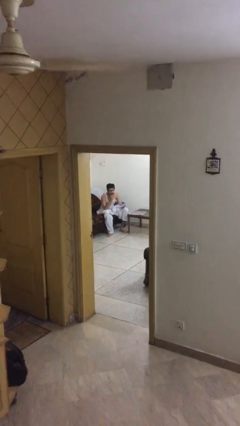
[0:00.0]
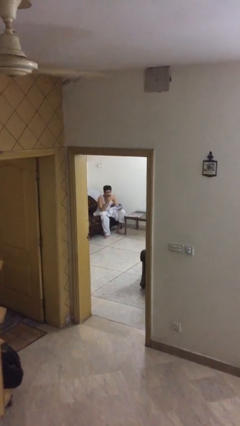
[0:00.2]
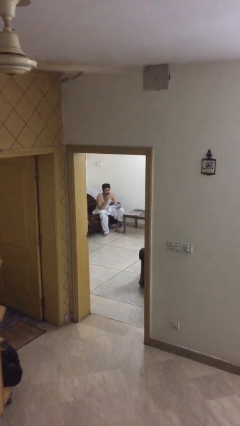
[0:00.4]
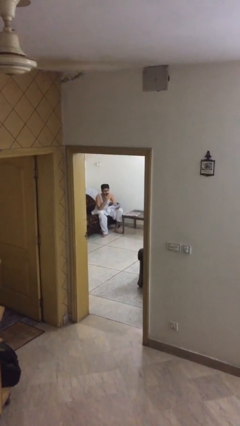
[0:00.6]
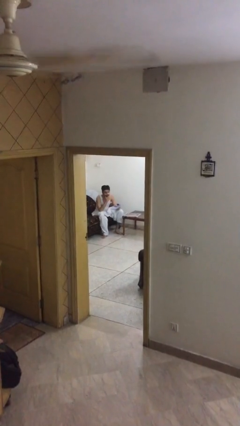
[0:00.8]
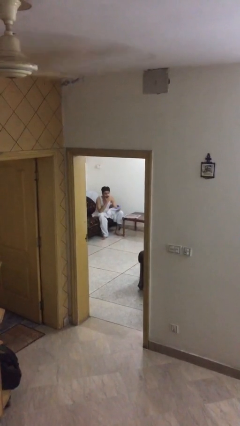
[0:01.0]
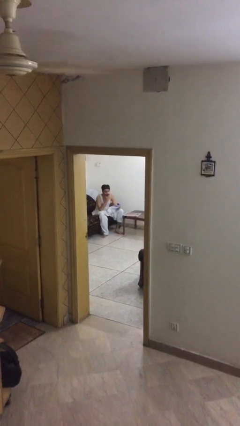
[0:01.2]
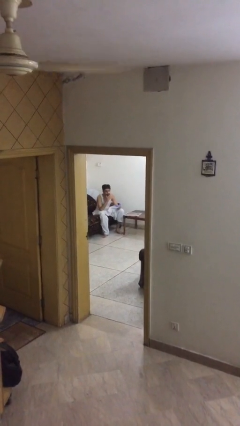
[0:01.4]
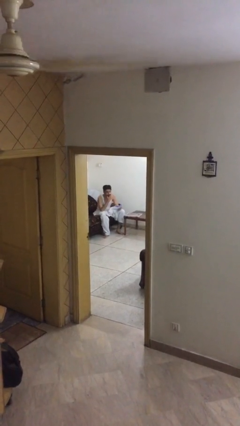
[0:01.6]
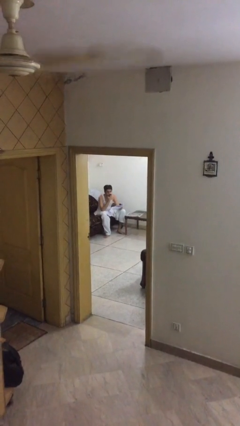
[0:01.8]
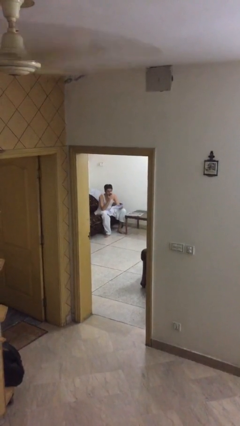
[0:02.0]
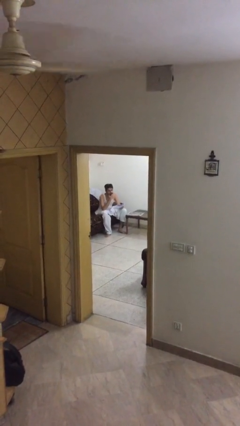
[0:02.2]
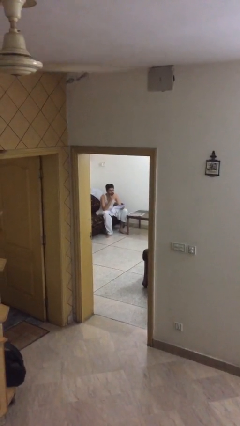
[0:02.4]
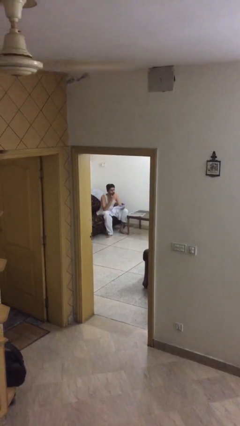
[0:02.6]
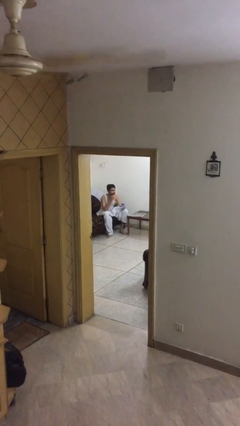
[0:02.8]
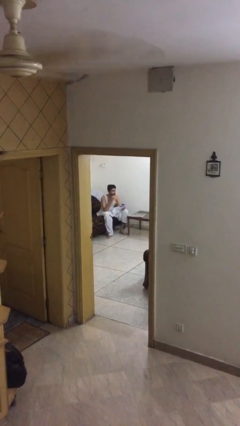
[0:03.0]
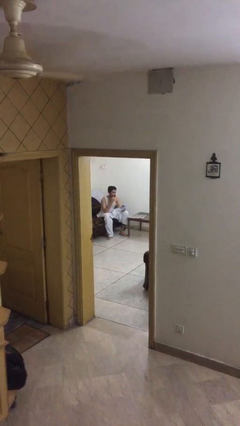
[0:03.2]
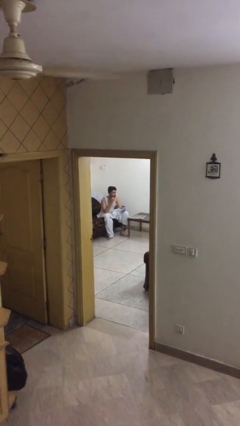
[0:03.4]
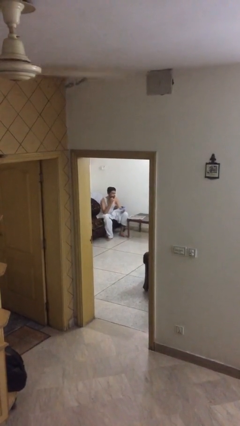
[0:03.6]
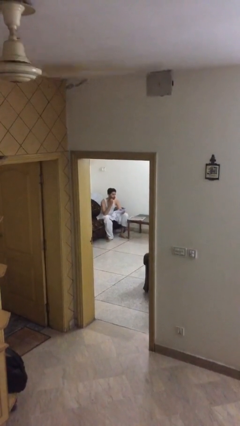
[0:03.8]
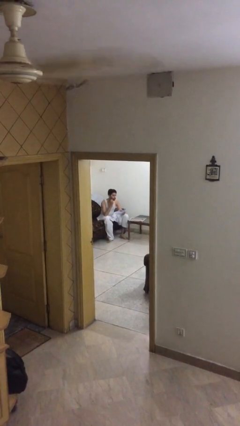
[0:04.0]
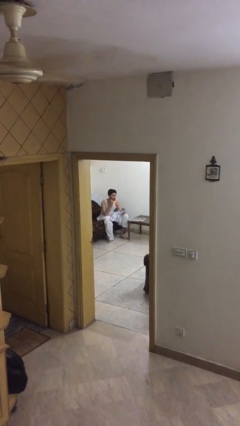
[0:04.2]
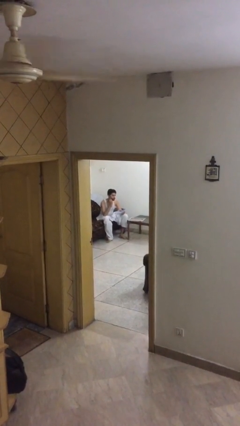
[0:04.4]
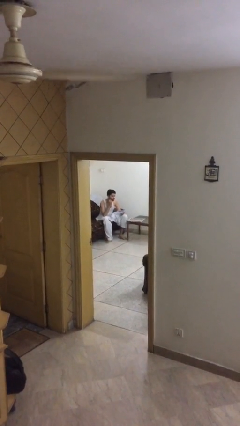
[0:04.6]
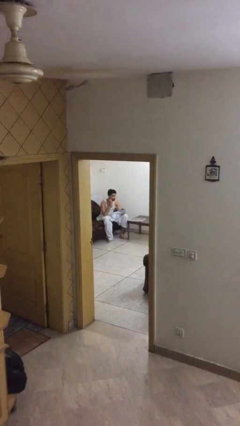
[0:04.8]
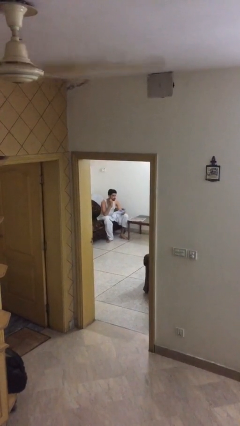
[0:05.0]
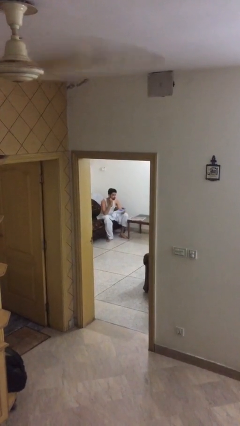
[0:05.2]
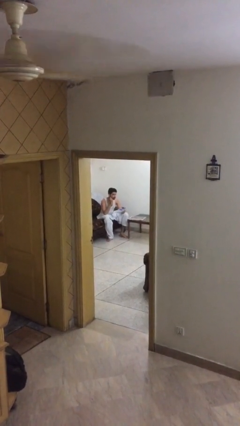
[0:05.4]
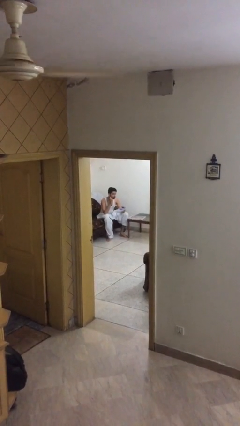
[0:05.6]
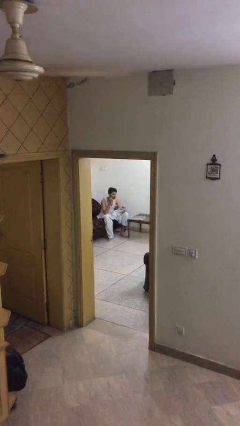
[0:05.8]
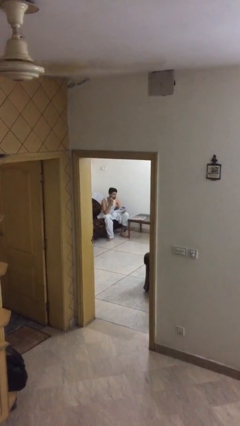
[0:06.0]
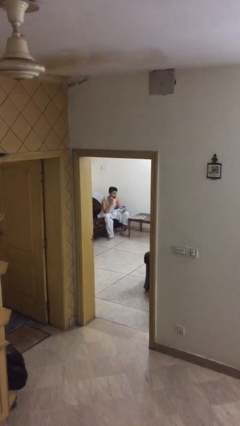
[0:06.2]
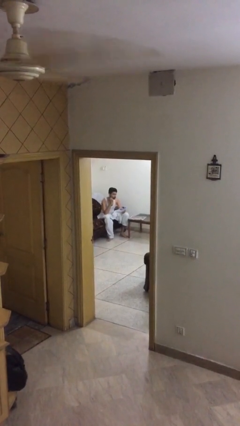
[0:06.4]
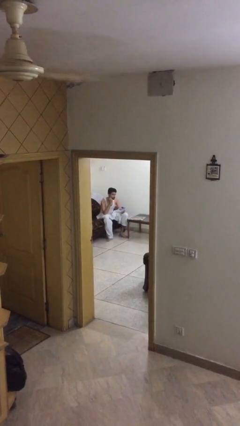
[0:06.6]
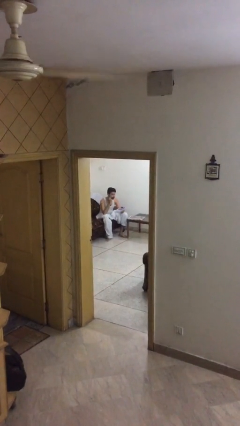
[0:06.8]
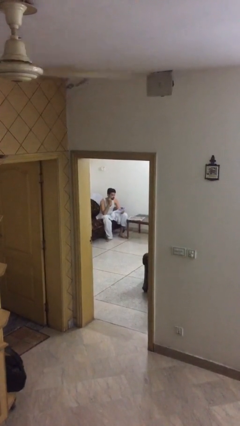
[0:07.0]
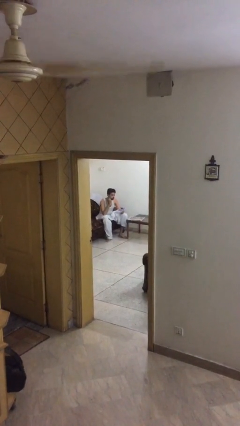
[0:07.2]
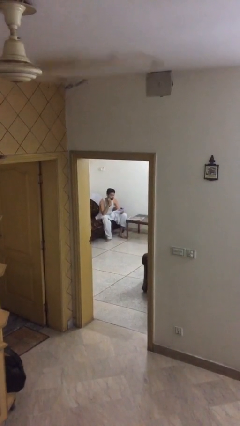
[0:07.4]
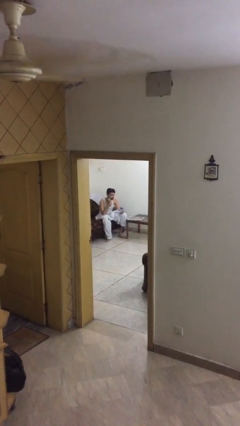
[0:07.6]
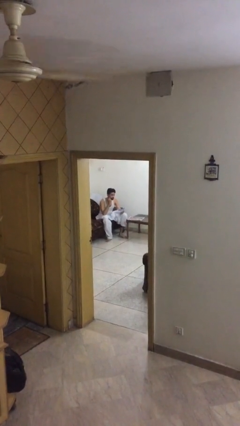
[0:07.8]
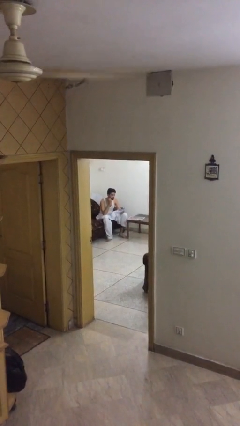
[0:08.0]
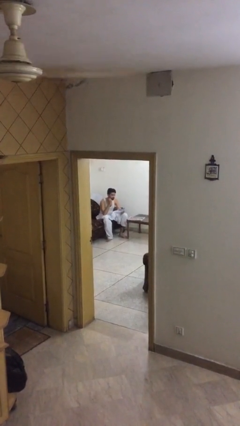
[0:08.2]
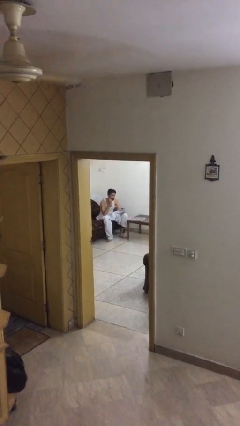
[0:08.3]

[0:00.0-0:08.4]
person reads document

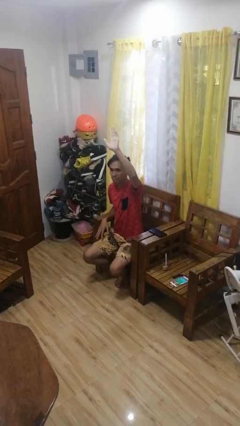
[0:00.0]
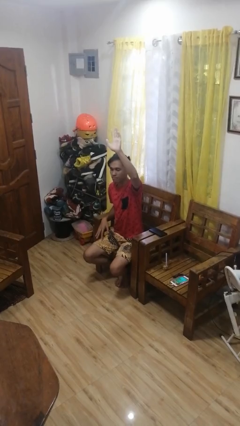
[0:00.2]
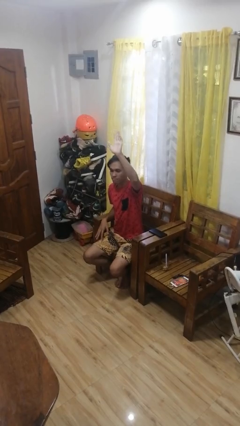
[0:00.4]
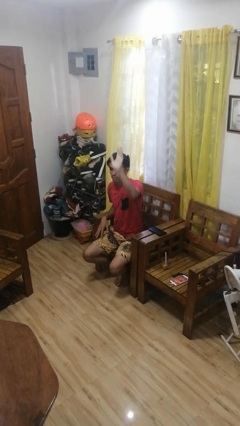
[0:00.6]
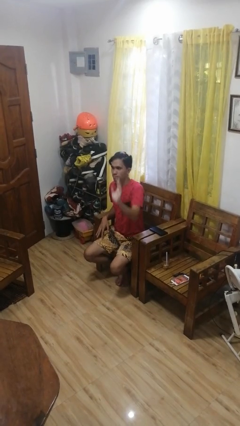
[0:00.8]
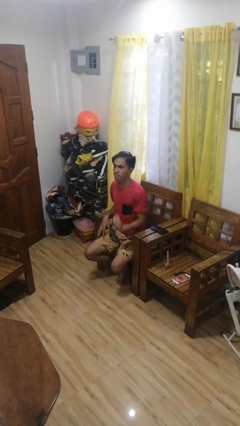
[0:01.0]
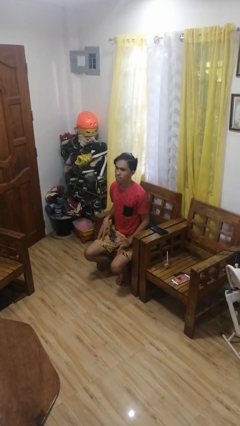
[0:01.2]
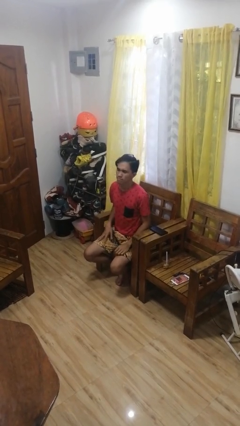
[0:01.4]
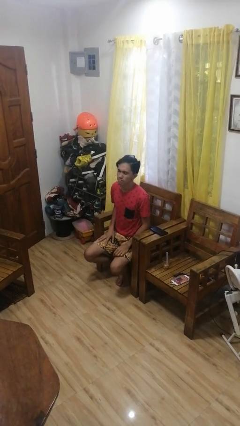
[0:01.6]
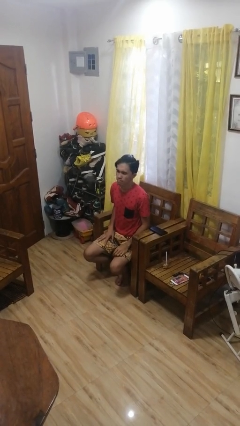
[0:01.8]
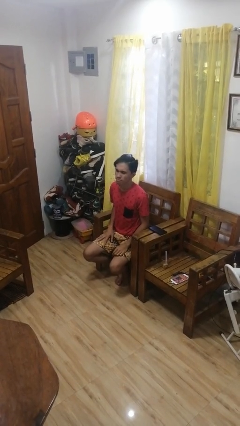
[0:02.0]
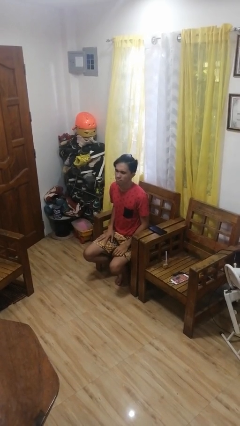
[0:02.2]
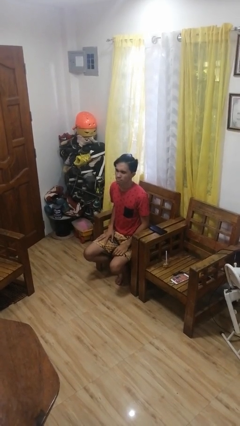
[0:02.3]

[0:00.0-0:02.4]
person gestures lower hand

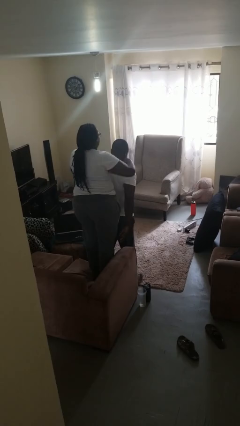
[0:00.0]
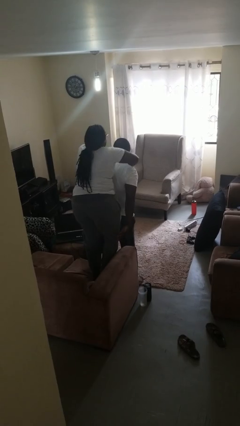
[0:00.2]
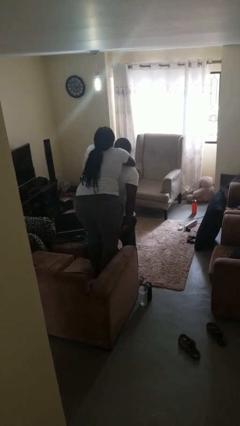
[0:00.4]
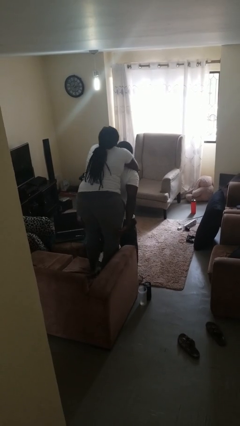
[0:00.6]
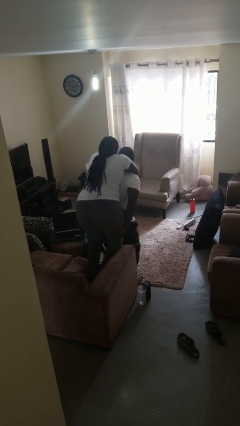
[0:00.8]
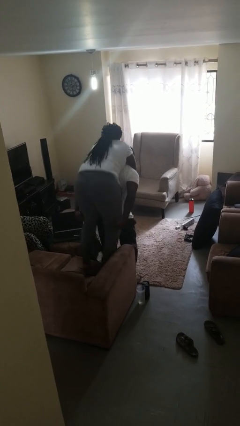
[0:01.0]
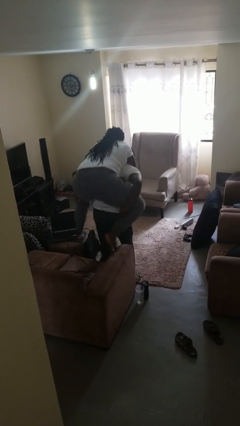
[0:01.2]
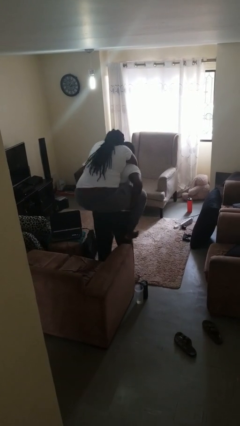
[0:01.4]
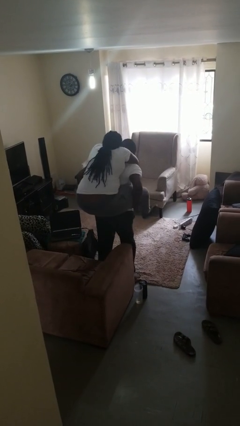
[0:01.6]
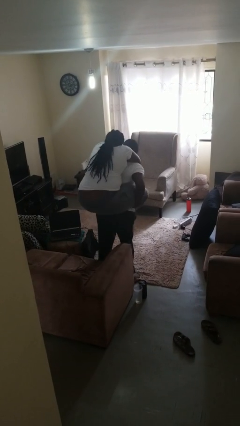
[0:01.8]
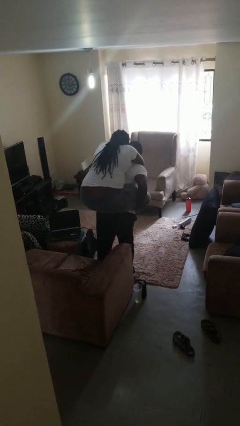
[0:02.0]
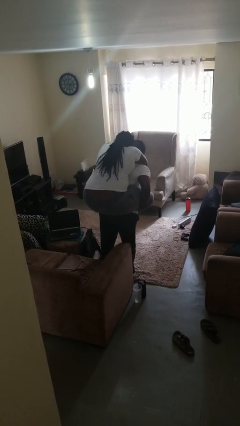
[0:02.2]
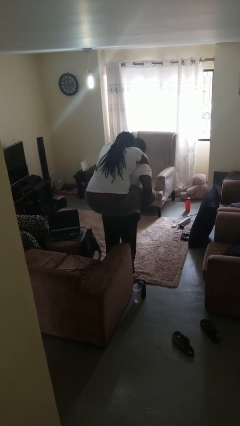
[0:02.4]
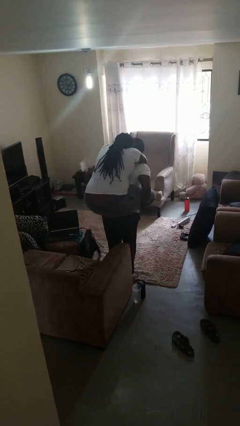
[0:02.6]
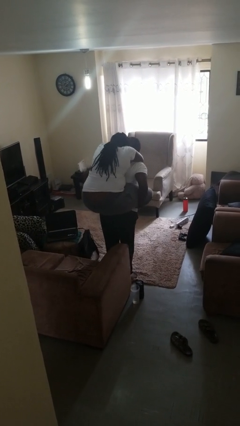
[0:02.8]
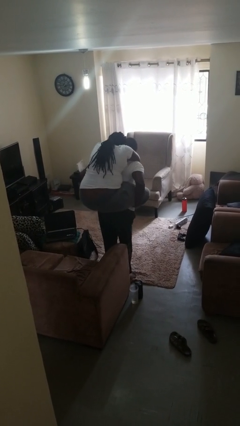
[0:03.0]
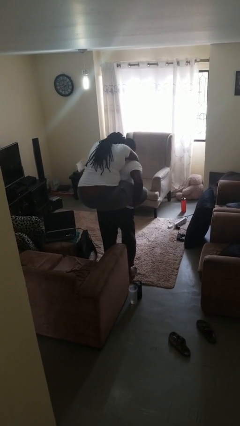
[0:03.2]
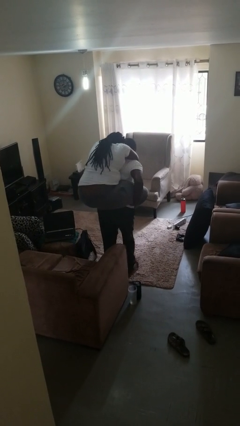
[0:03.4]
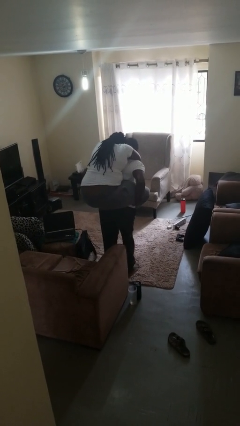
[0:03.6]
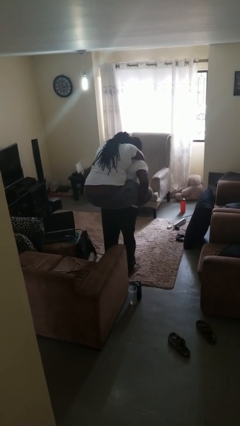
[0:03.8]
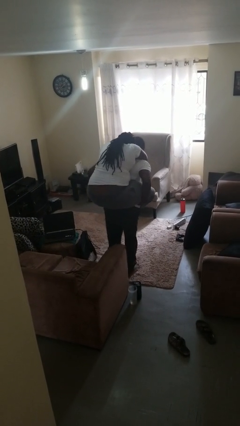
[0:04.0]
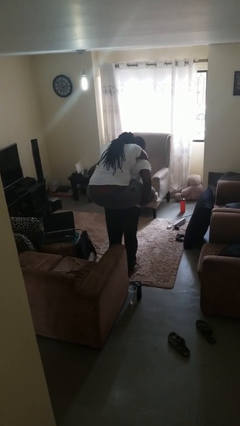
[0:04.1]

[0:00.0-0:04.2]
person carries person on back

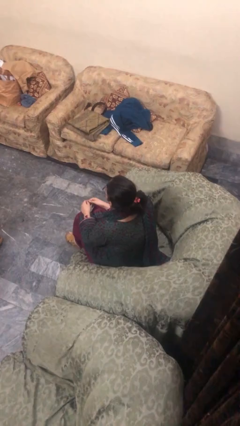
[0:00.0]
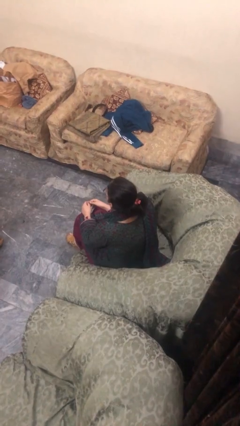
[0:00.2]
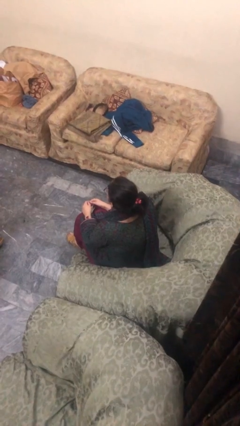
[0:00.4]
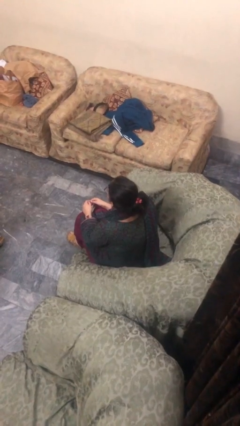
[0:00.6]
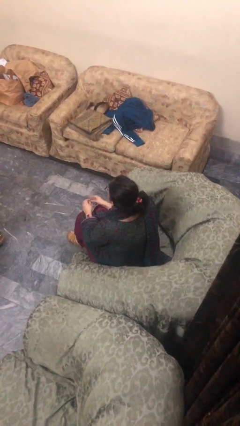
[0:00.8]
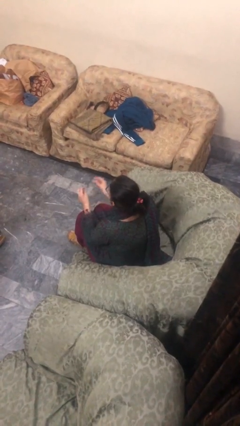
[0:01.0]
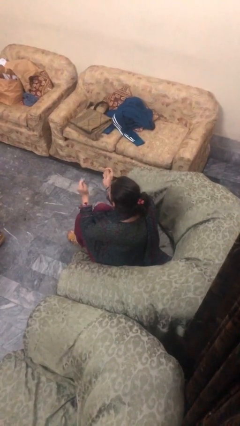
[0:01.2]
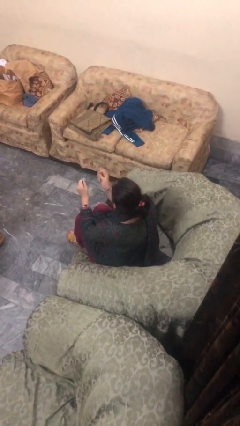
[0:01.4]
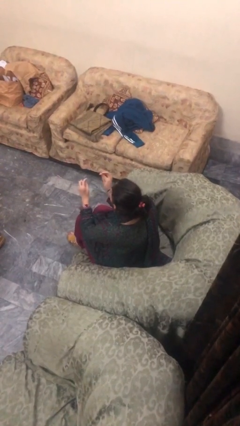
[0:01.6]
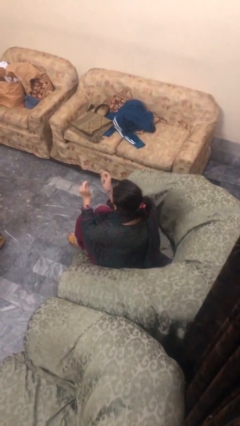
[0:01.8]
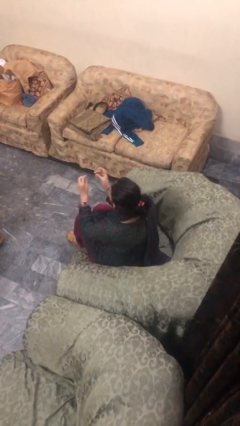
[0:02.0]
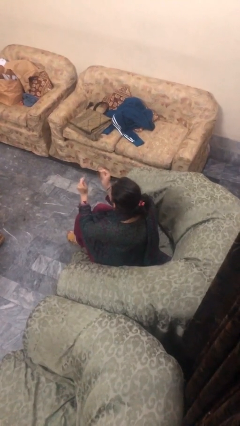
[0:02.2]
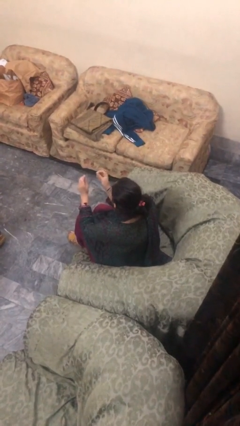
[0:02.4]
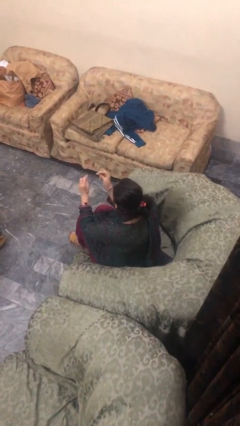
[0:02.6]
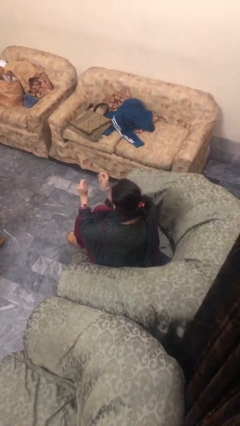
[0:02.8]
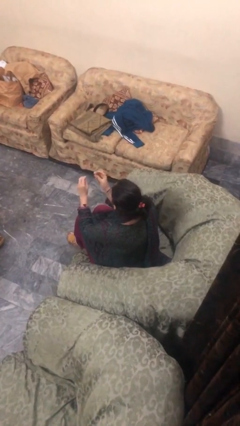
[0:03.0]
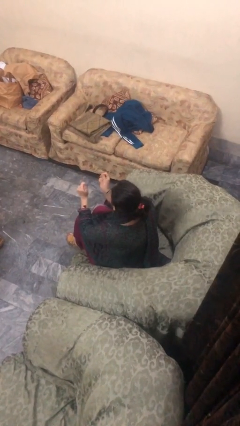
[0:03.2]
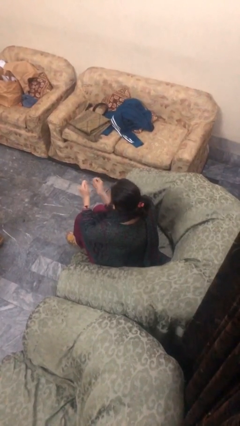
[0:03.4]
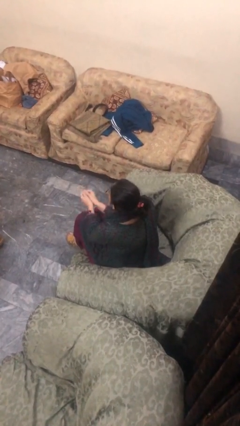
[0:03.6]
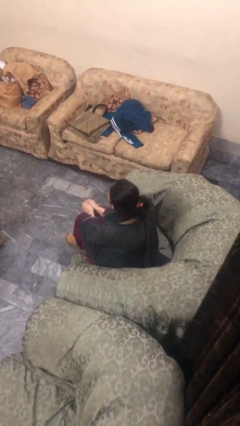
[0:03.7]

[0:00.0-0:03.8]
person snaps fingers
